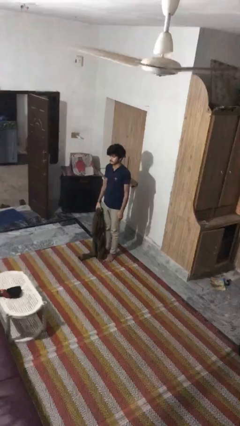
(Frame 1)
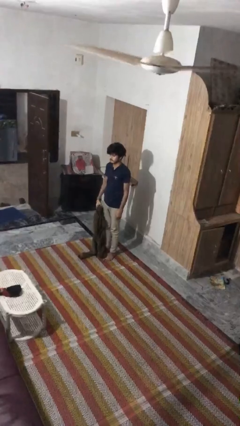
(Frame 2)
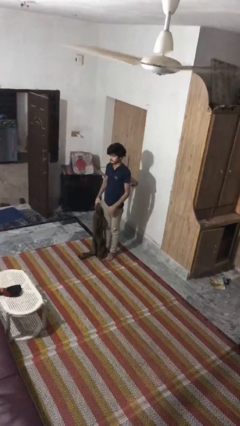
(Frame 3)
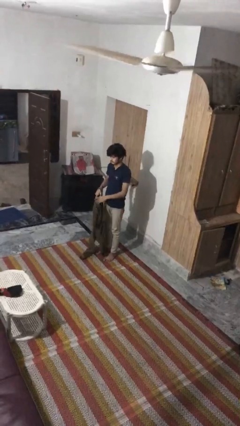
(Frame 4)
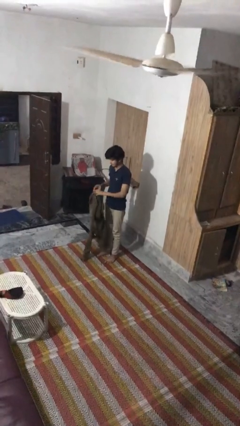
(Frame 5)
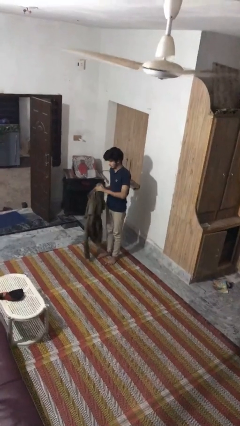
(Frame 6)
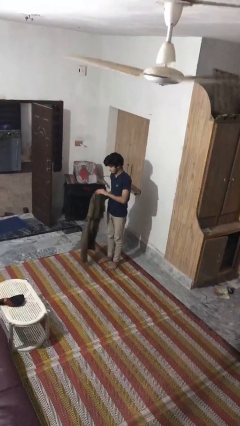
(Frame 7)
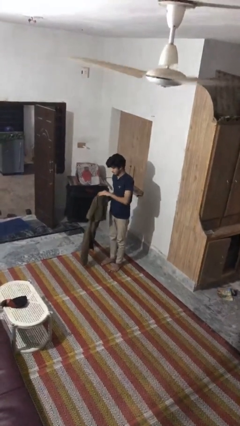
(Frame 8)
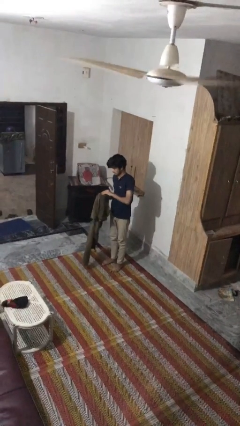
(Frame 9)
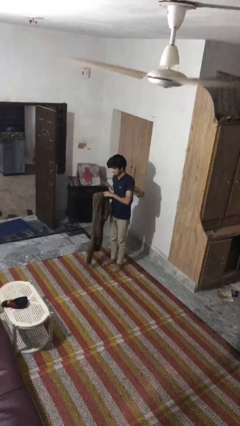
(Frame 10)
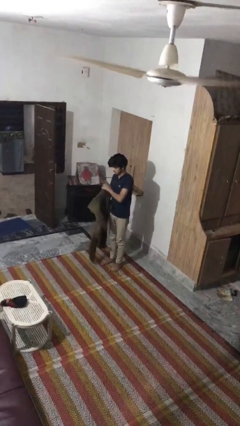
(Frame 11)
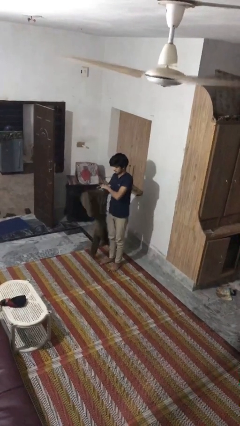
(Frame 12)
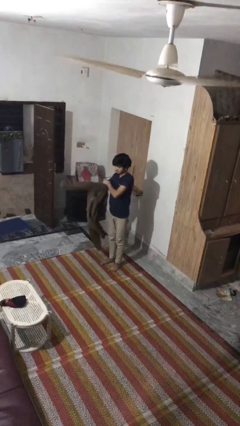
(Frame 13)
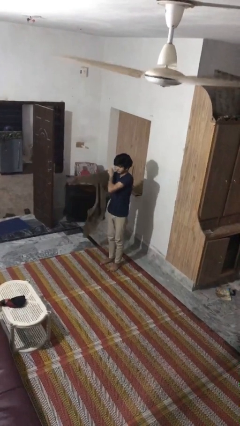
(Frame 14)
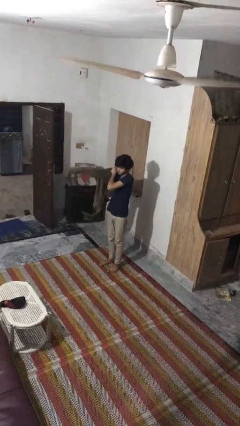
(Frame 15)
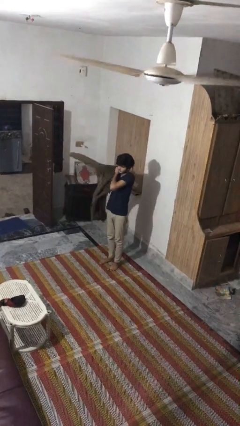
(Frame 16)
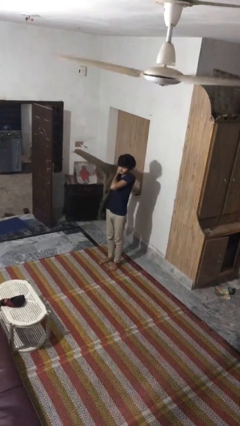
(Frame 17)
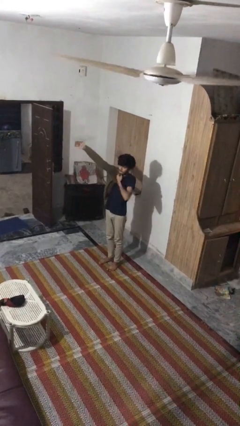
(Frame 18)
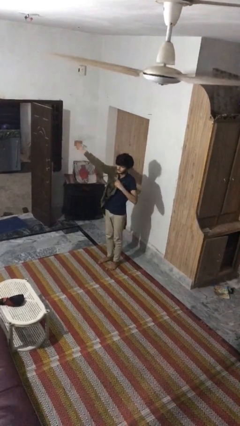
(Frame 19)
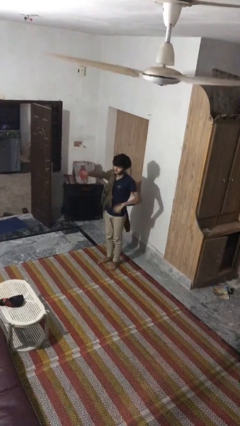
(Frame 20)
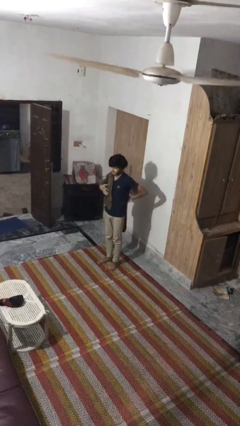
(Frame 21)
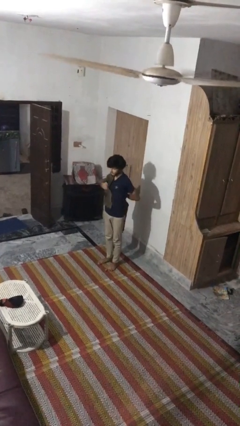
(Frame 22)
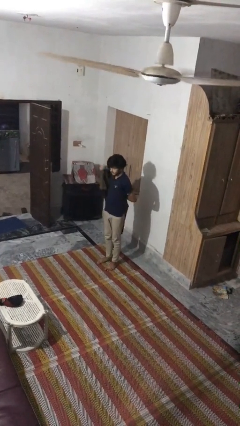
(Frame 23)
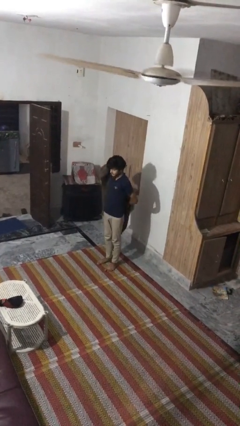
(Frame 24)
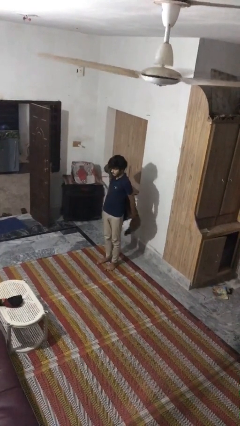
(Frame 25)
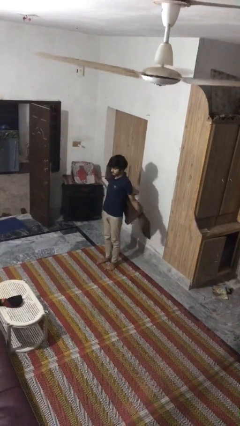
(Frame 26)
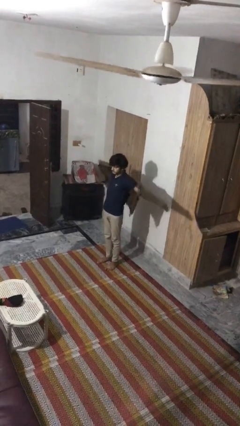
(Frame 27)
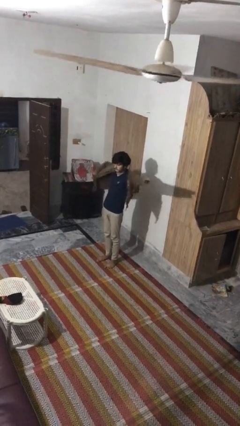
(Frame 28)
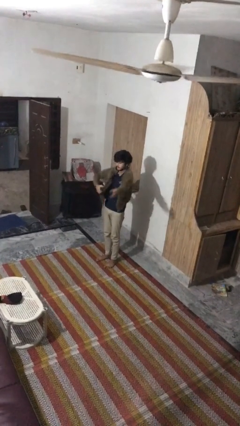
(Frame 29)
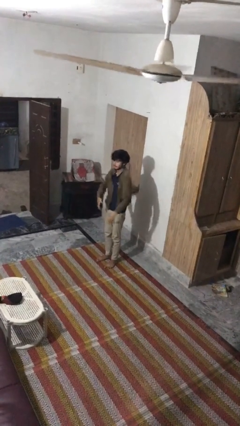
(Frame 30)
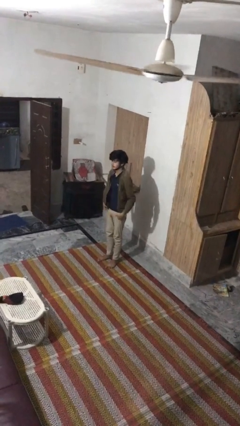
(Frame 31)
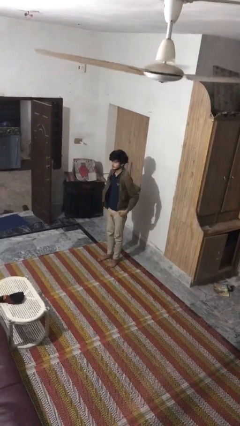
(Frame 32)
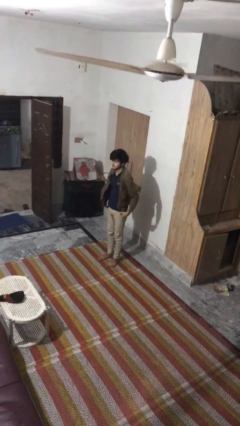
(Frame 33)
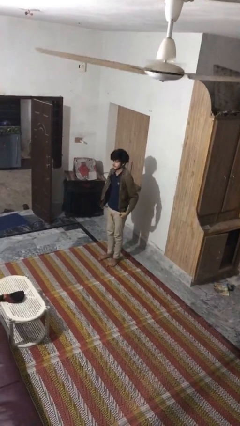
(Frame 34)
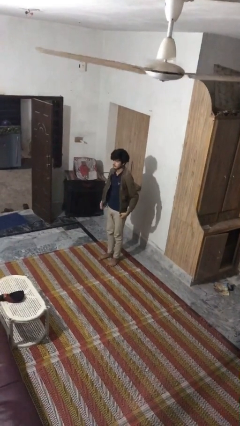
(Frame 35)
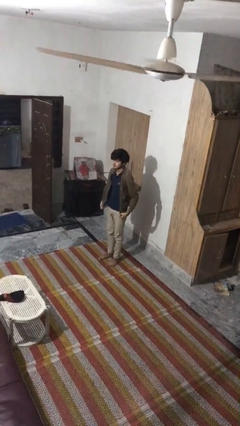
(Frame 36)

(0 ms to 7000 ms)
person puts on jacket

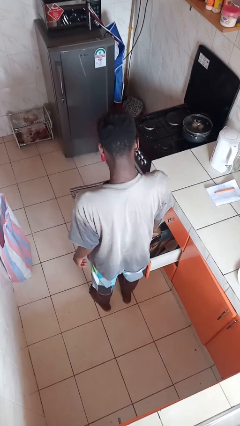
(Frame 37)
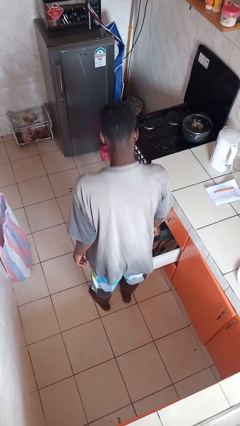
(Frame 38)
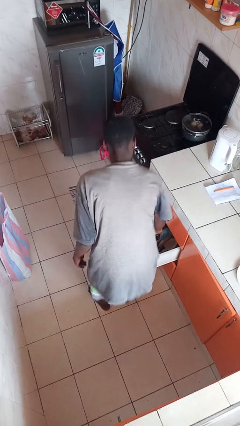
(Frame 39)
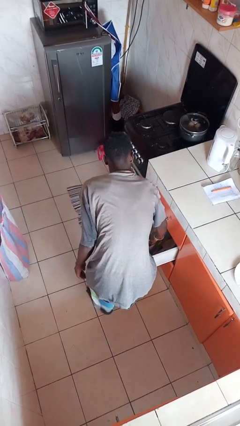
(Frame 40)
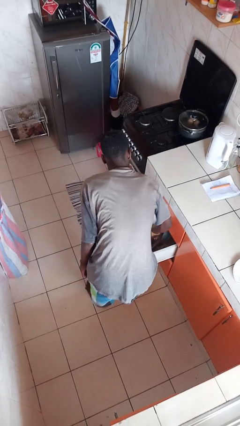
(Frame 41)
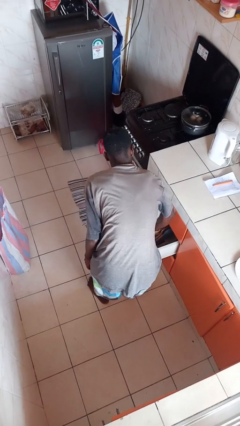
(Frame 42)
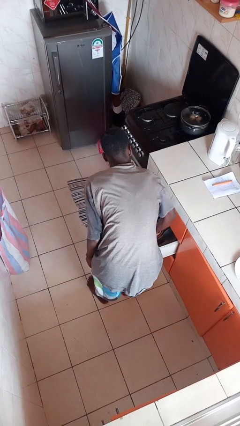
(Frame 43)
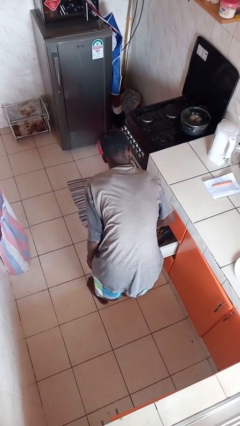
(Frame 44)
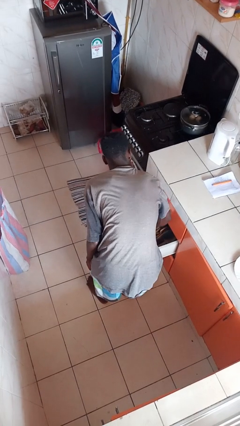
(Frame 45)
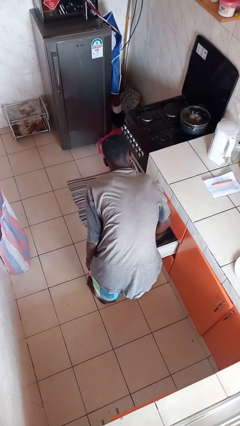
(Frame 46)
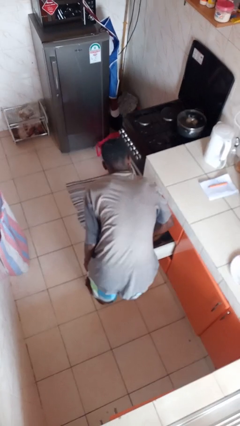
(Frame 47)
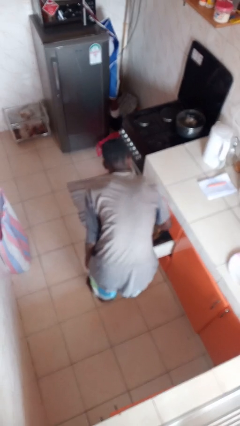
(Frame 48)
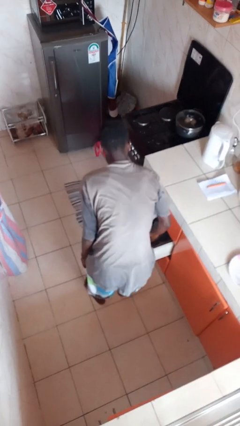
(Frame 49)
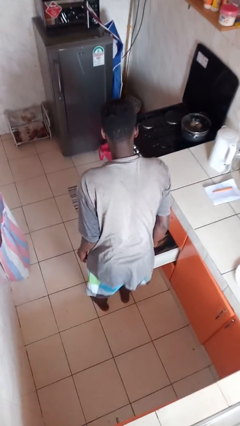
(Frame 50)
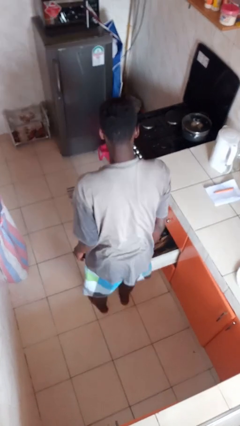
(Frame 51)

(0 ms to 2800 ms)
person searches in kitchen drawer

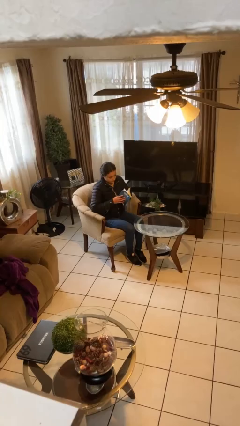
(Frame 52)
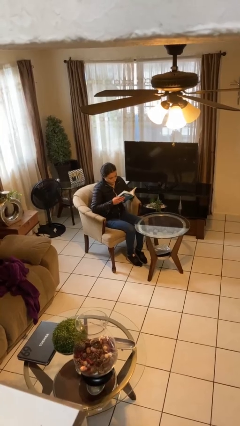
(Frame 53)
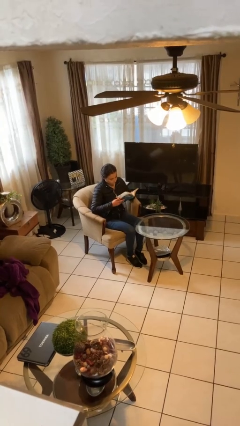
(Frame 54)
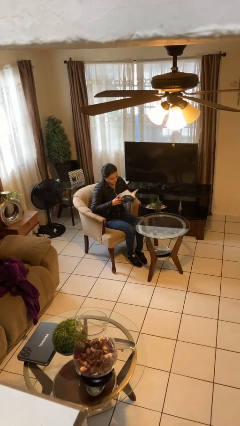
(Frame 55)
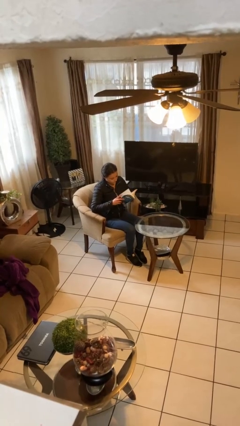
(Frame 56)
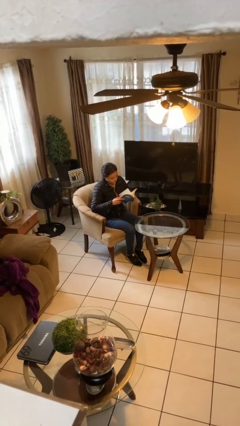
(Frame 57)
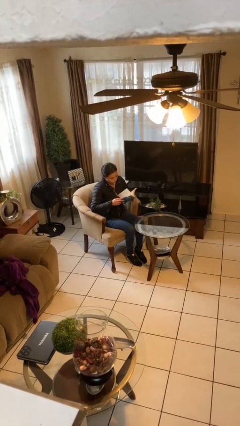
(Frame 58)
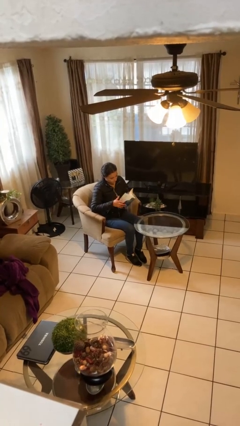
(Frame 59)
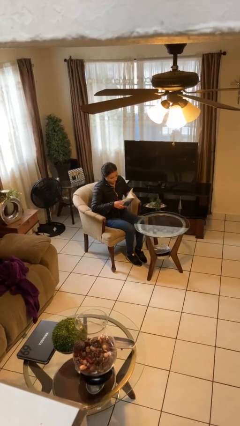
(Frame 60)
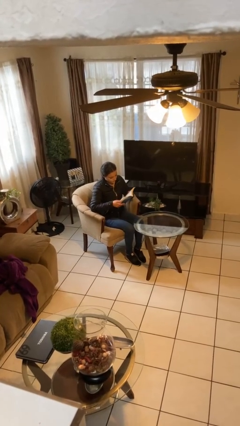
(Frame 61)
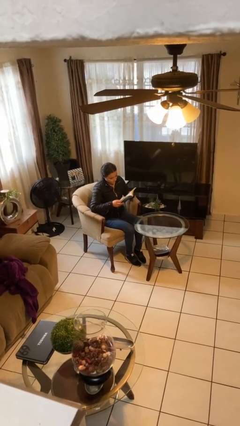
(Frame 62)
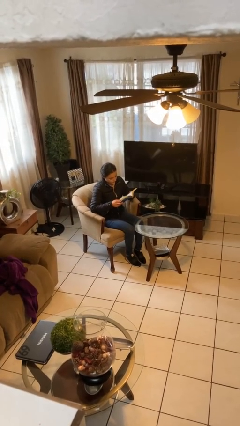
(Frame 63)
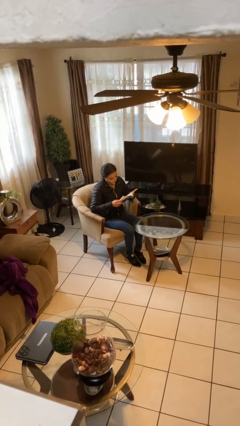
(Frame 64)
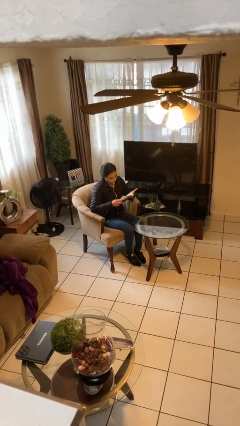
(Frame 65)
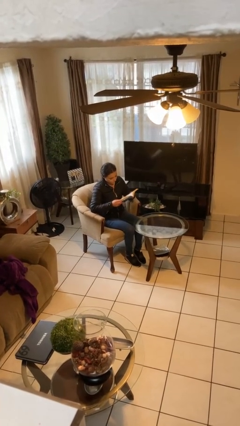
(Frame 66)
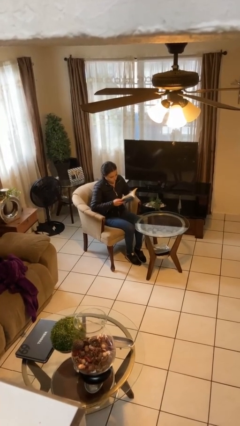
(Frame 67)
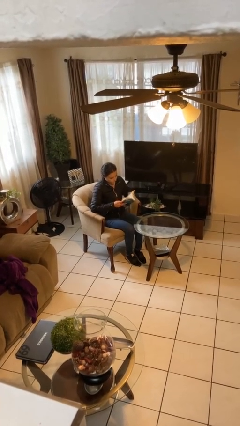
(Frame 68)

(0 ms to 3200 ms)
person reads document

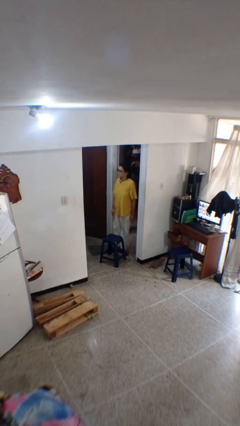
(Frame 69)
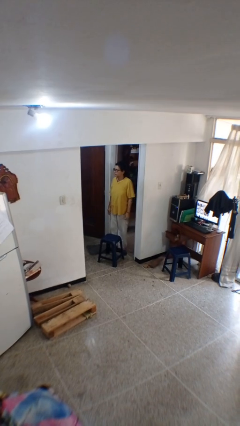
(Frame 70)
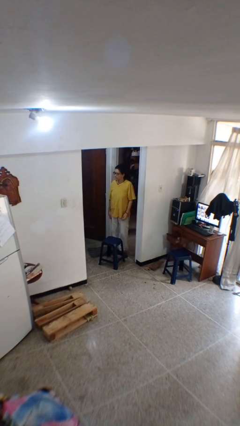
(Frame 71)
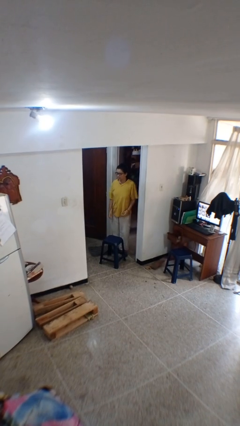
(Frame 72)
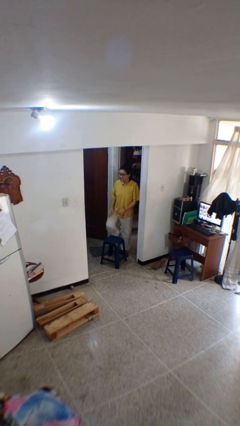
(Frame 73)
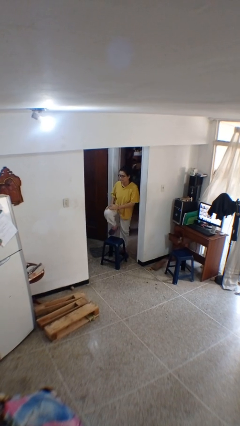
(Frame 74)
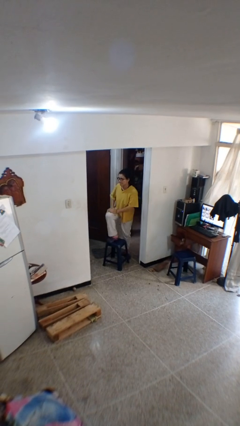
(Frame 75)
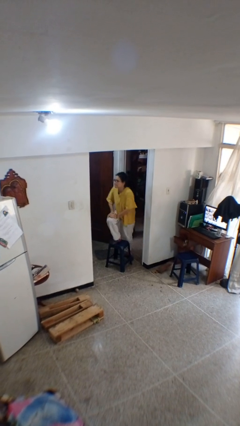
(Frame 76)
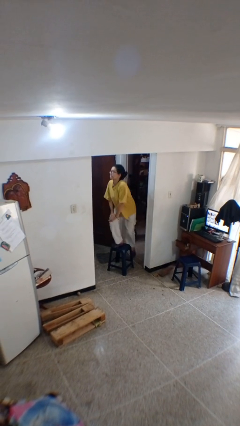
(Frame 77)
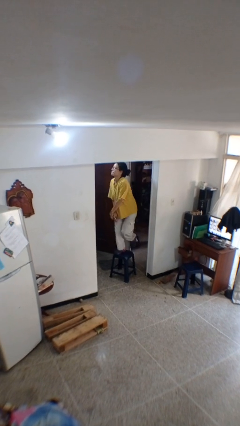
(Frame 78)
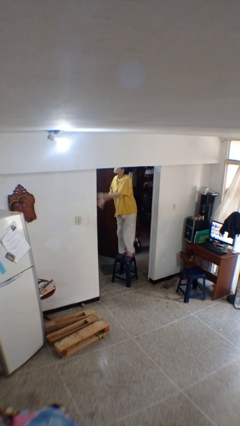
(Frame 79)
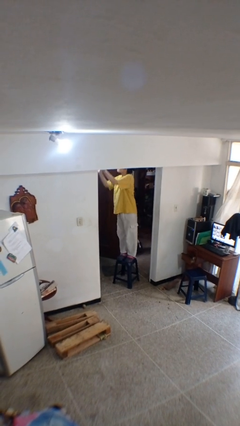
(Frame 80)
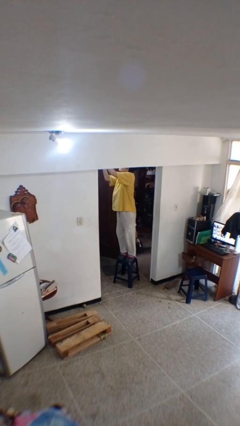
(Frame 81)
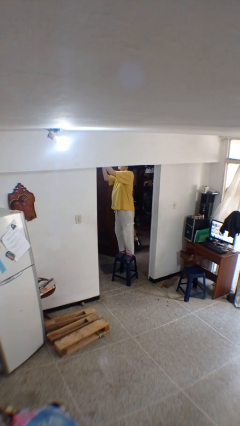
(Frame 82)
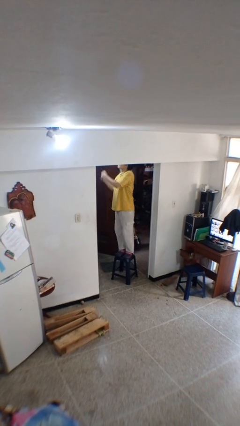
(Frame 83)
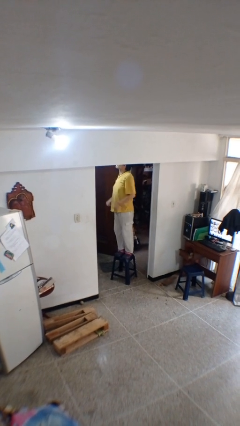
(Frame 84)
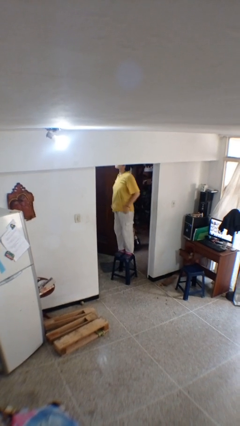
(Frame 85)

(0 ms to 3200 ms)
person climbs on chair

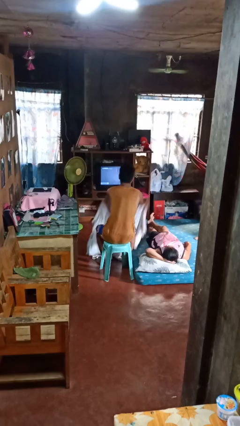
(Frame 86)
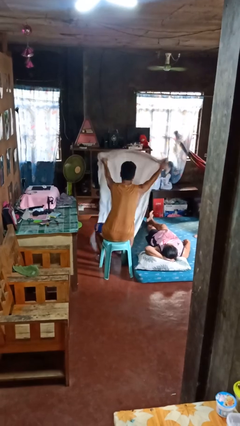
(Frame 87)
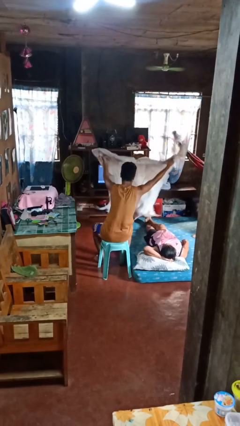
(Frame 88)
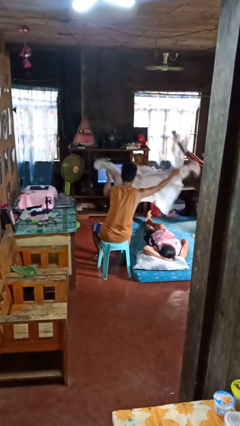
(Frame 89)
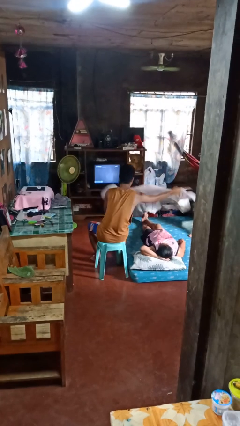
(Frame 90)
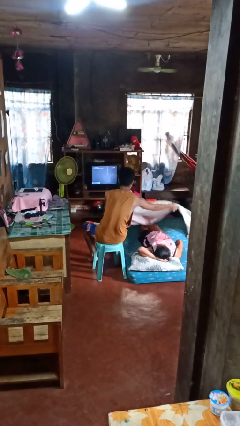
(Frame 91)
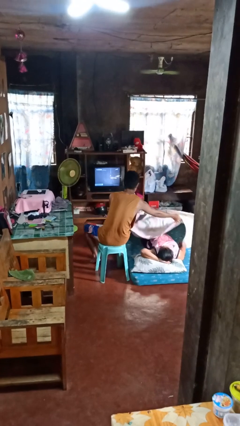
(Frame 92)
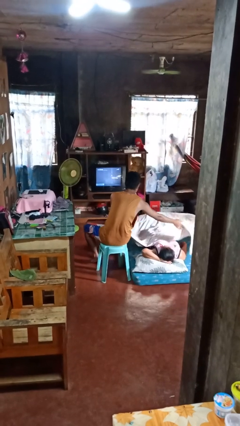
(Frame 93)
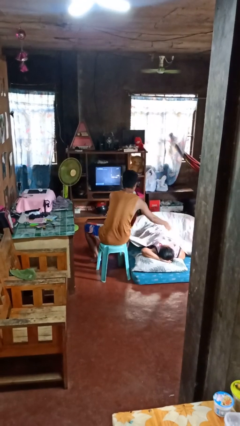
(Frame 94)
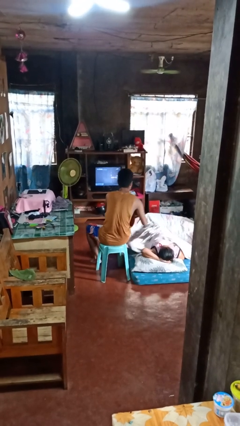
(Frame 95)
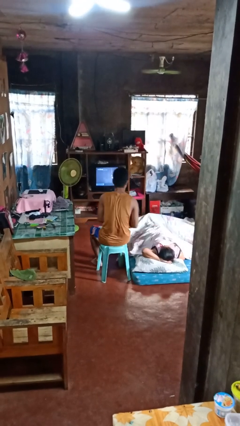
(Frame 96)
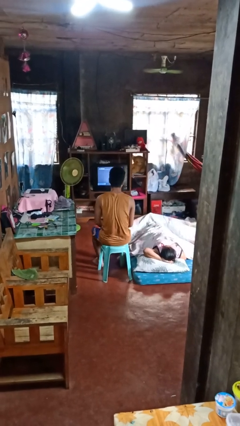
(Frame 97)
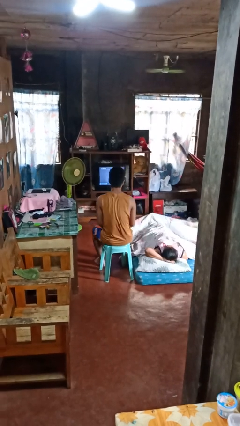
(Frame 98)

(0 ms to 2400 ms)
person covers friend with blanket
